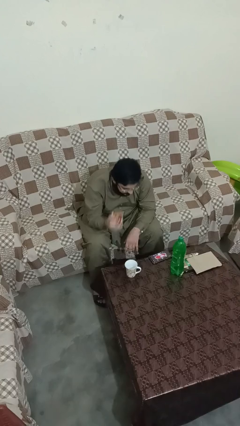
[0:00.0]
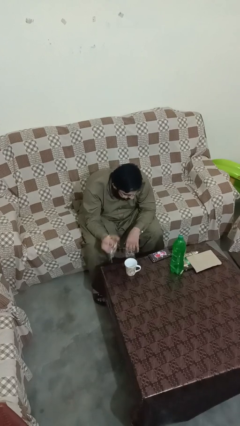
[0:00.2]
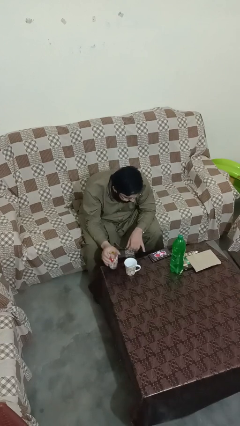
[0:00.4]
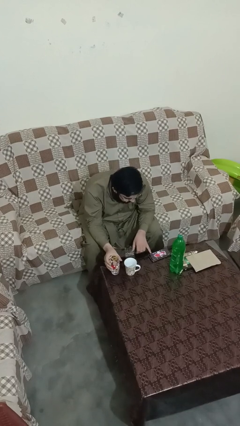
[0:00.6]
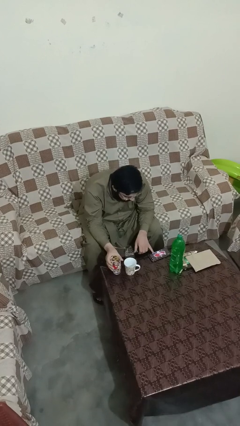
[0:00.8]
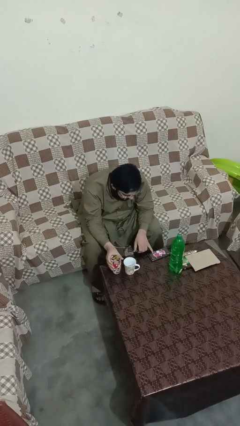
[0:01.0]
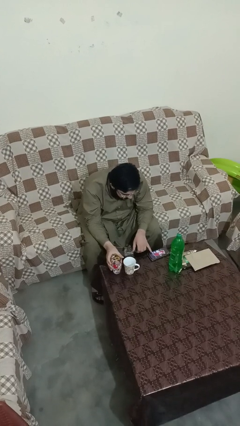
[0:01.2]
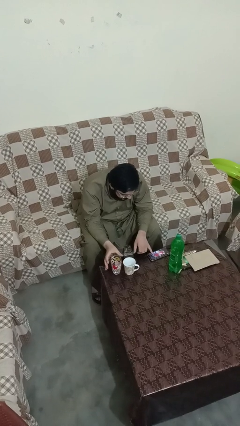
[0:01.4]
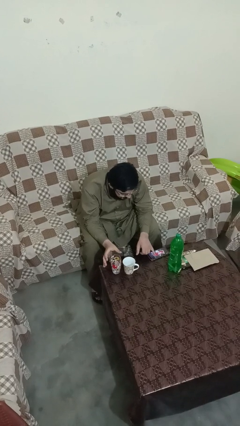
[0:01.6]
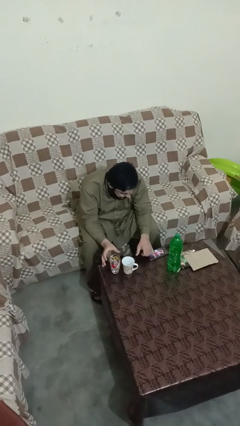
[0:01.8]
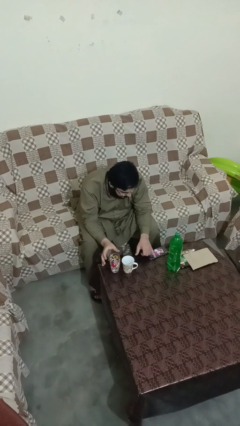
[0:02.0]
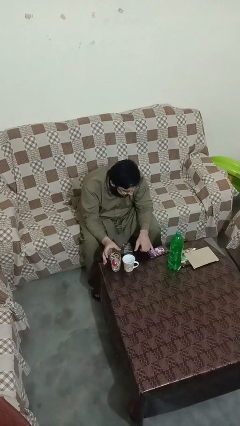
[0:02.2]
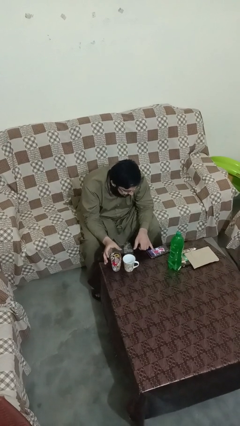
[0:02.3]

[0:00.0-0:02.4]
person puts down object on table

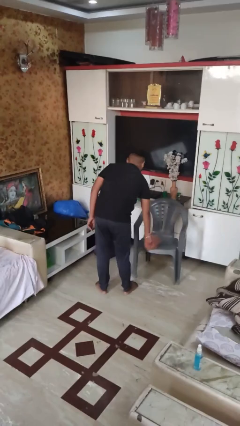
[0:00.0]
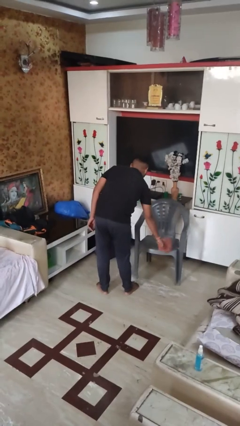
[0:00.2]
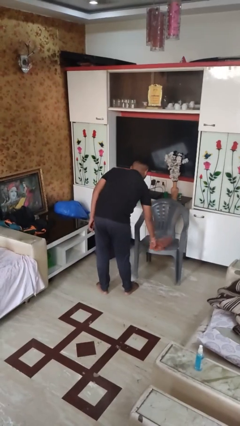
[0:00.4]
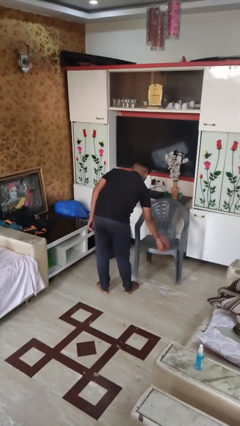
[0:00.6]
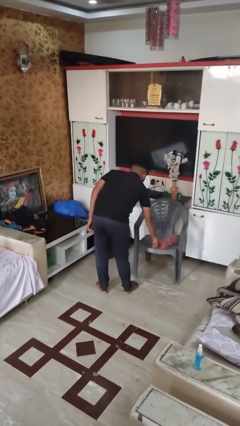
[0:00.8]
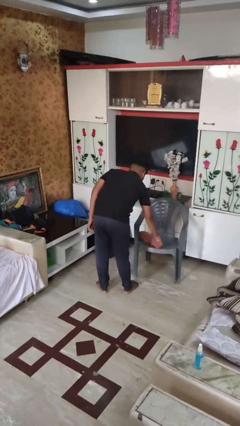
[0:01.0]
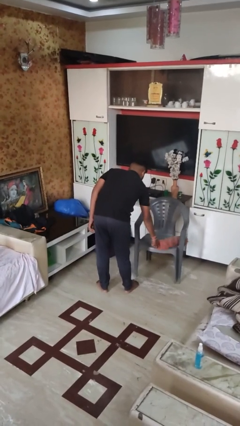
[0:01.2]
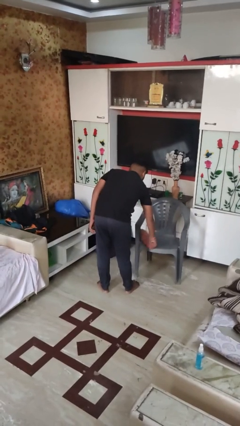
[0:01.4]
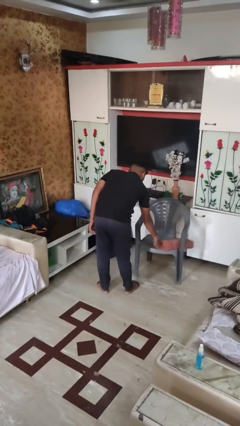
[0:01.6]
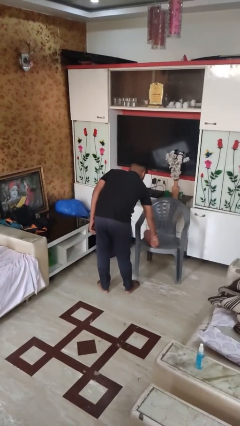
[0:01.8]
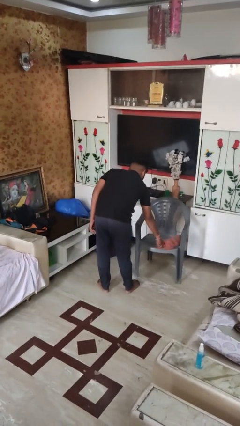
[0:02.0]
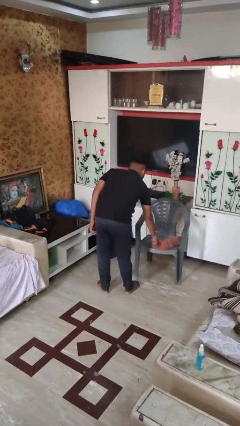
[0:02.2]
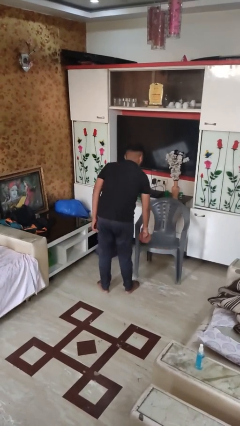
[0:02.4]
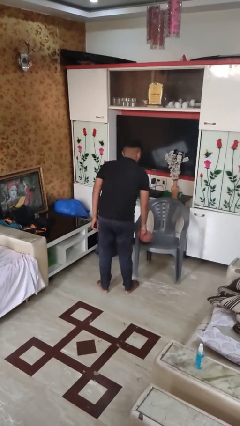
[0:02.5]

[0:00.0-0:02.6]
person dusts furniture

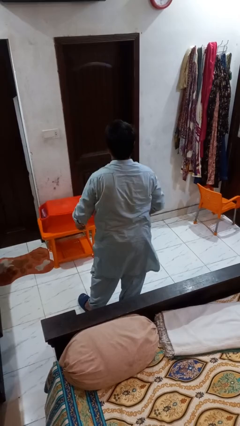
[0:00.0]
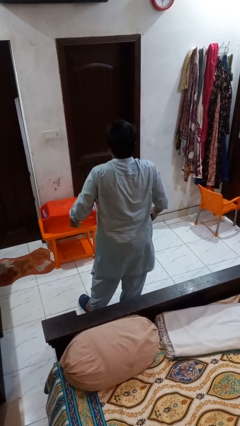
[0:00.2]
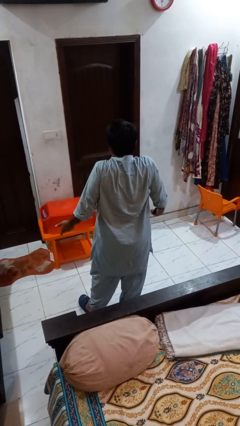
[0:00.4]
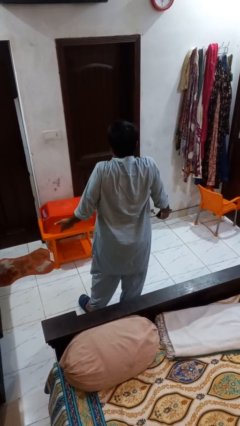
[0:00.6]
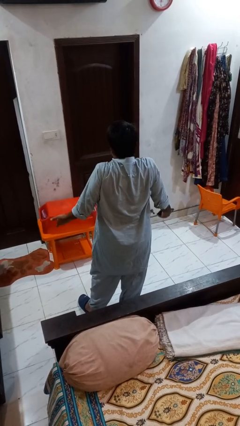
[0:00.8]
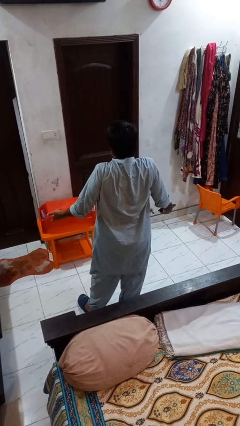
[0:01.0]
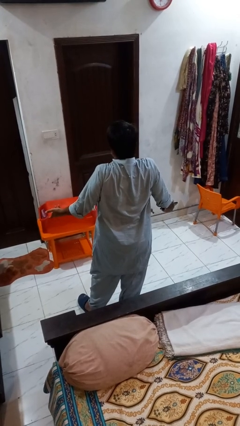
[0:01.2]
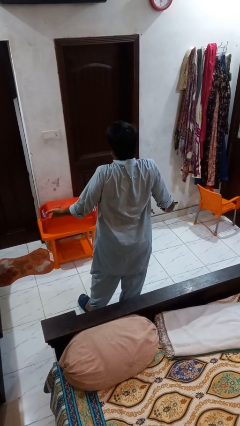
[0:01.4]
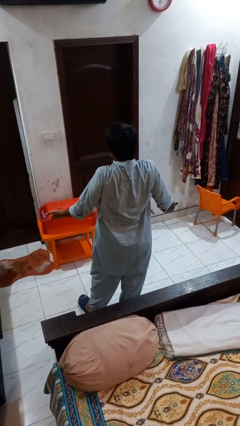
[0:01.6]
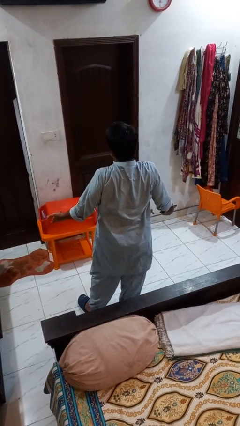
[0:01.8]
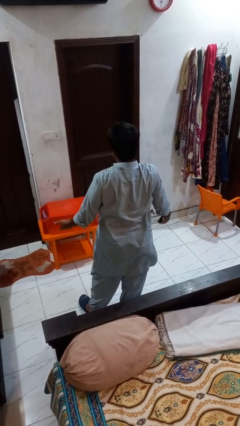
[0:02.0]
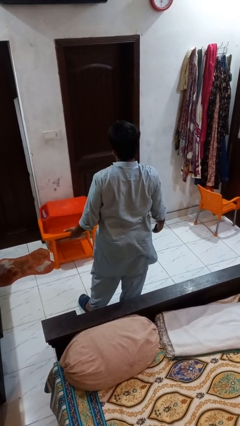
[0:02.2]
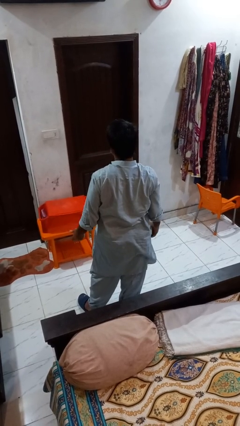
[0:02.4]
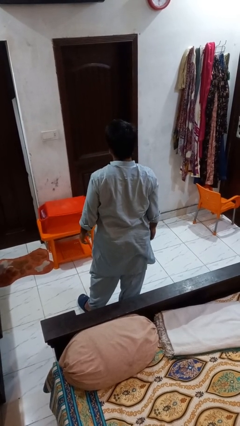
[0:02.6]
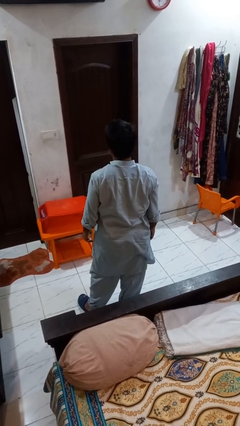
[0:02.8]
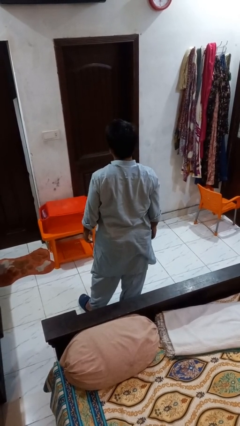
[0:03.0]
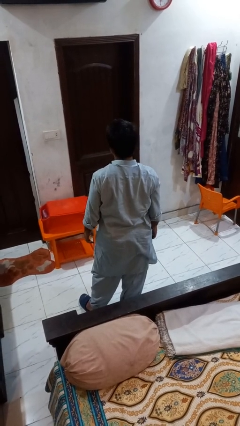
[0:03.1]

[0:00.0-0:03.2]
person shrugs

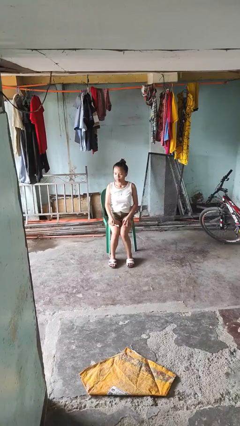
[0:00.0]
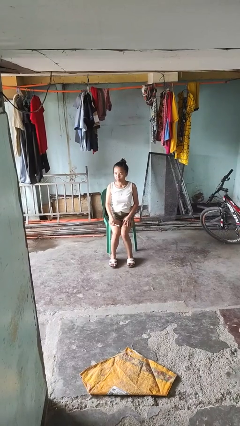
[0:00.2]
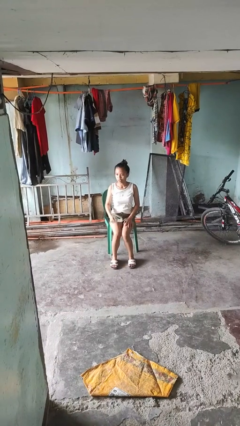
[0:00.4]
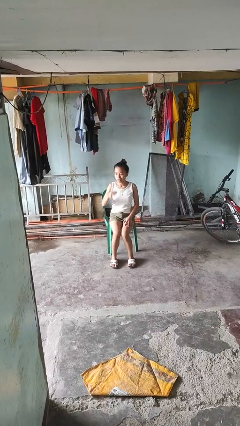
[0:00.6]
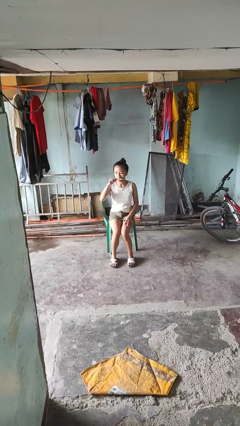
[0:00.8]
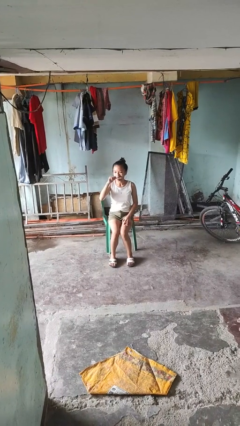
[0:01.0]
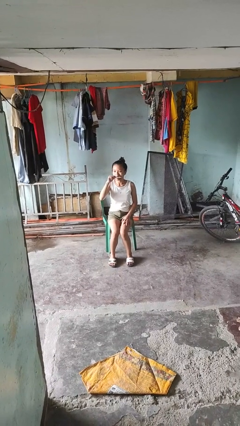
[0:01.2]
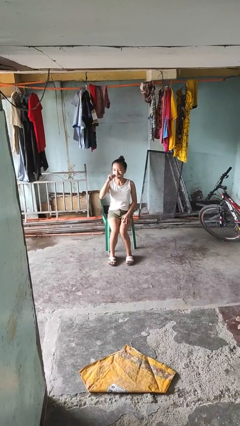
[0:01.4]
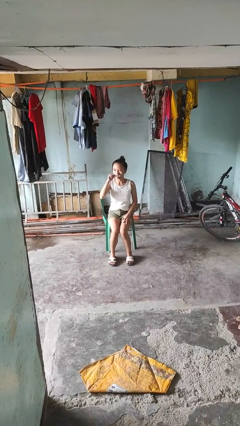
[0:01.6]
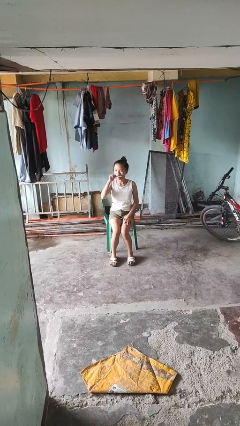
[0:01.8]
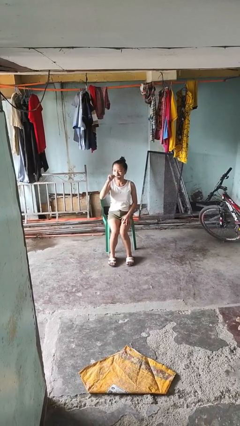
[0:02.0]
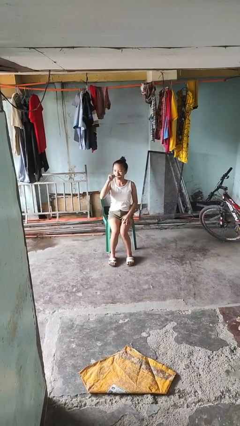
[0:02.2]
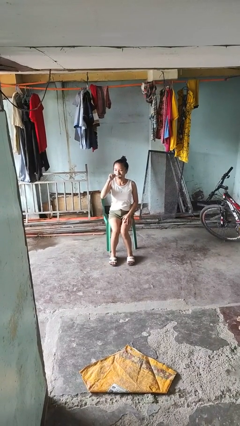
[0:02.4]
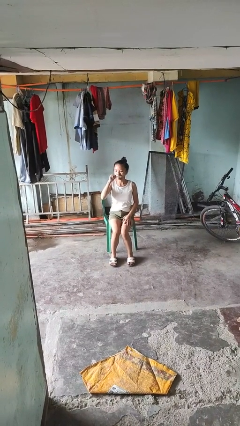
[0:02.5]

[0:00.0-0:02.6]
person brushes teeth

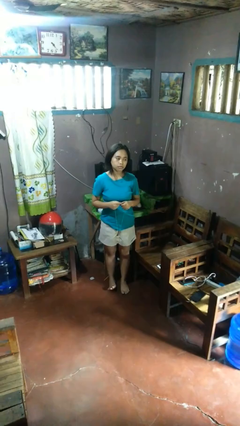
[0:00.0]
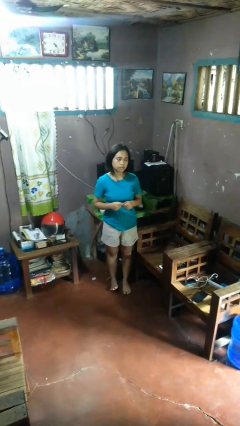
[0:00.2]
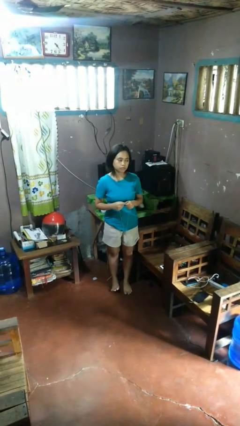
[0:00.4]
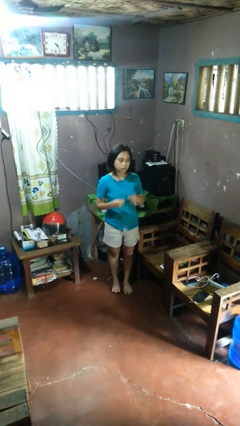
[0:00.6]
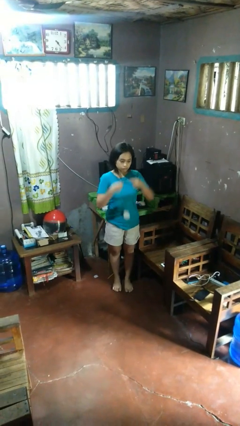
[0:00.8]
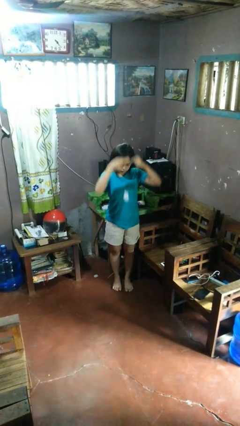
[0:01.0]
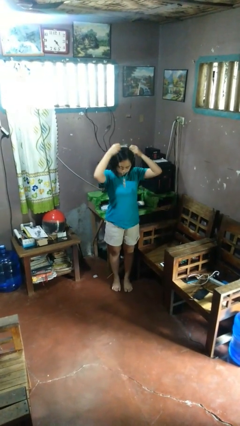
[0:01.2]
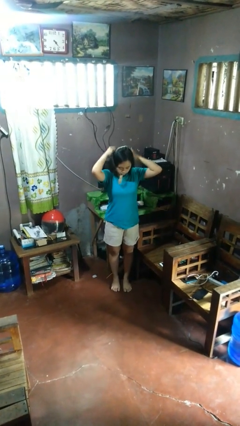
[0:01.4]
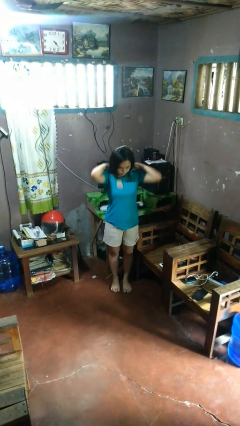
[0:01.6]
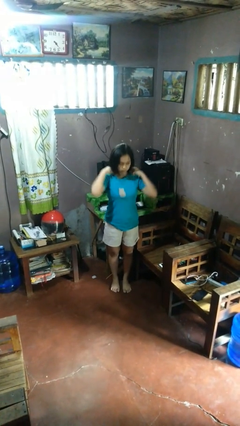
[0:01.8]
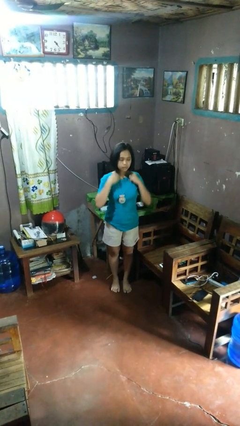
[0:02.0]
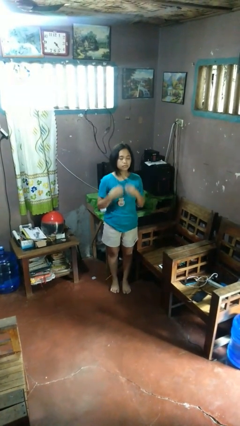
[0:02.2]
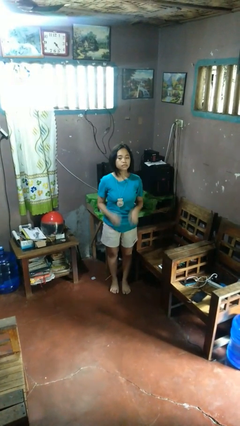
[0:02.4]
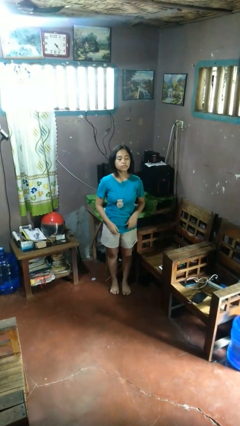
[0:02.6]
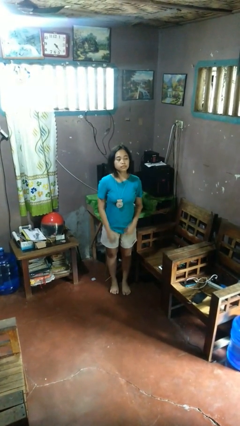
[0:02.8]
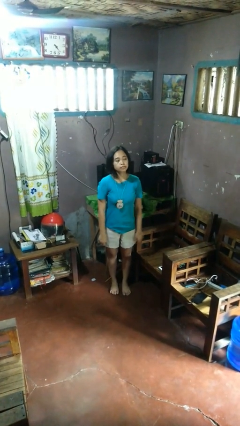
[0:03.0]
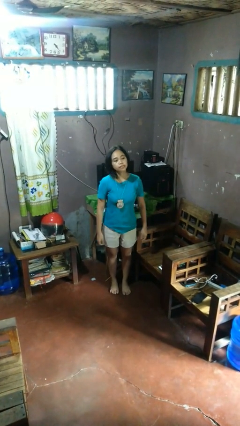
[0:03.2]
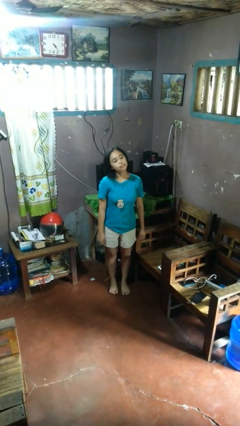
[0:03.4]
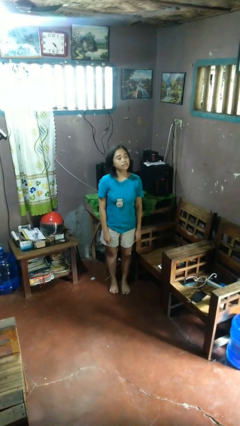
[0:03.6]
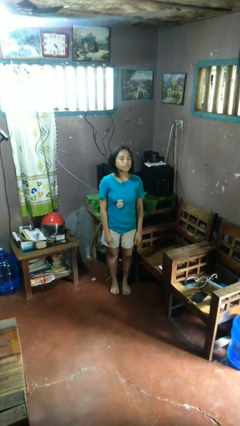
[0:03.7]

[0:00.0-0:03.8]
person puts on necklace

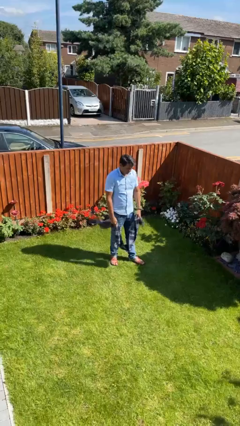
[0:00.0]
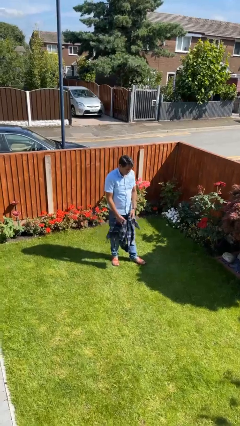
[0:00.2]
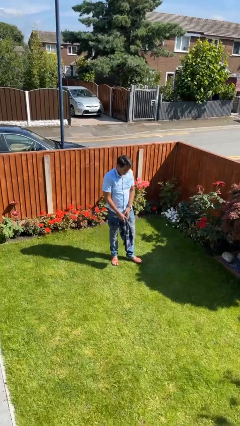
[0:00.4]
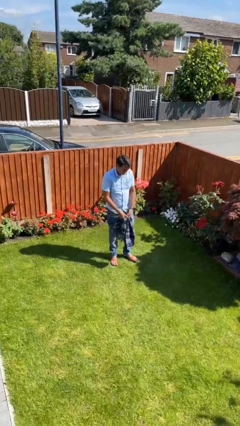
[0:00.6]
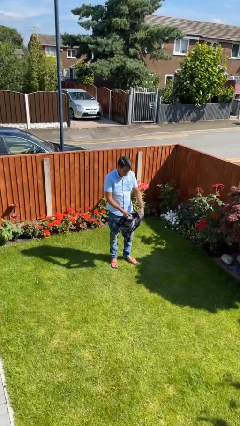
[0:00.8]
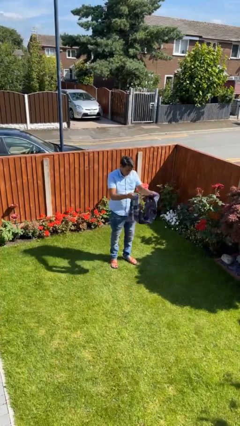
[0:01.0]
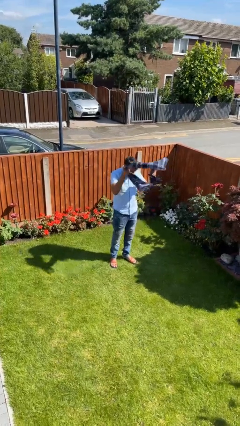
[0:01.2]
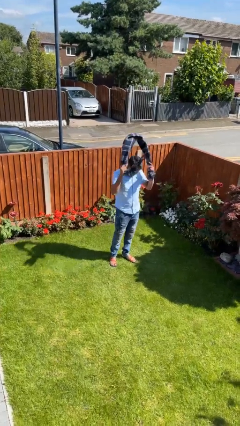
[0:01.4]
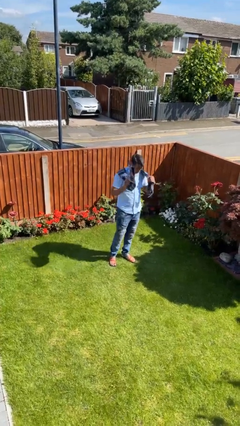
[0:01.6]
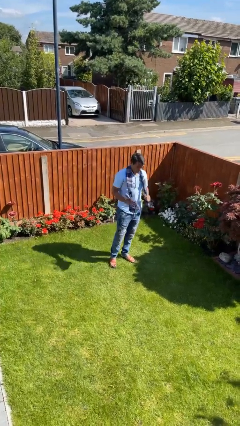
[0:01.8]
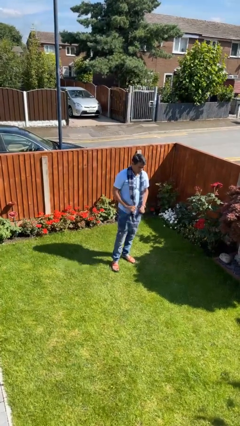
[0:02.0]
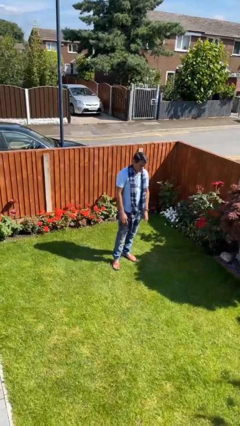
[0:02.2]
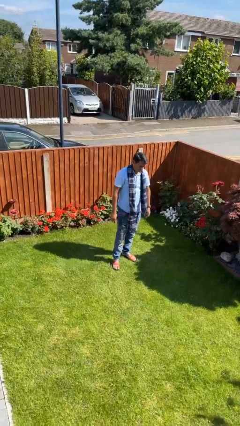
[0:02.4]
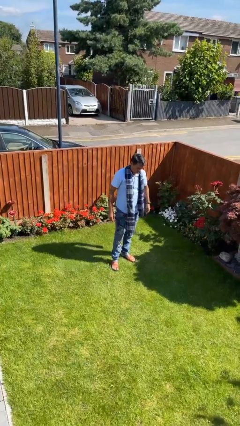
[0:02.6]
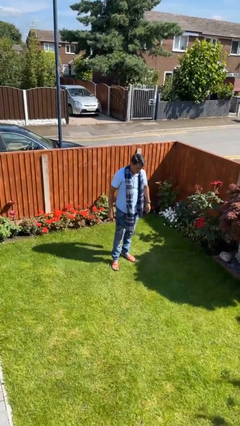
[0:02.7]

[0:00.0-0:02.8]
person puts on scarf
